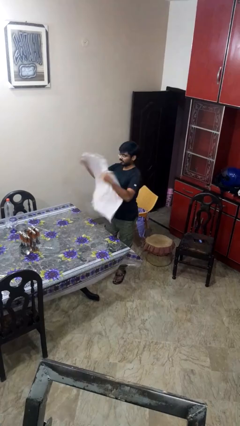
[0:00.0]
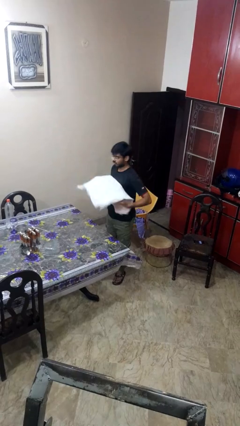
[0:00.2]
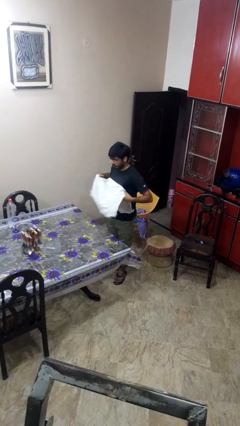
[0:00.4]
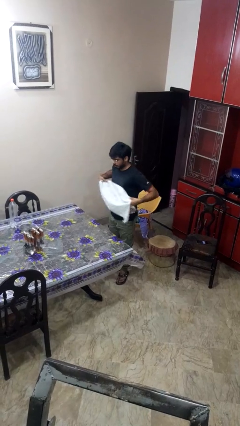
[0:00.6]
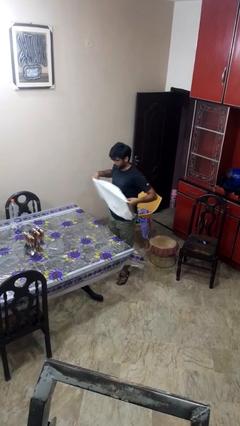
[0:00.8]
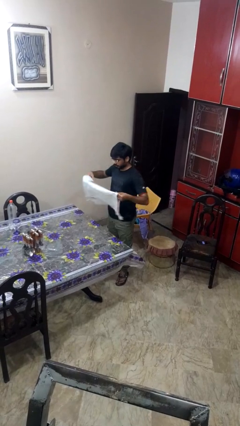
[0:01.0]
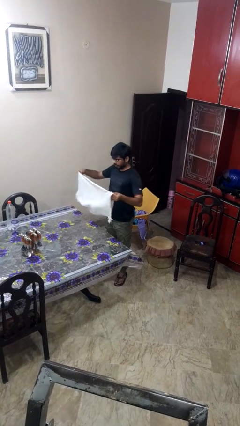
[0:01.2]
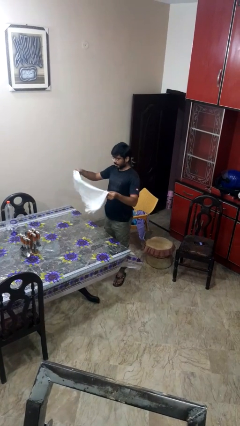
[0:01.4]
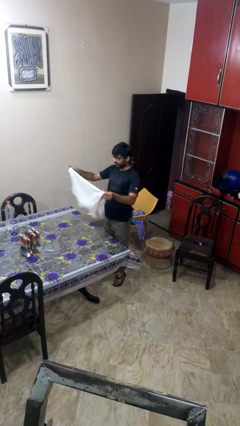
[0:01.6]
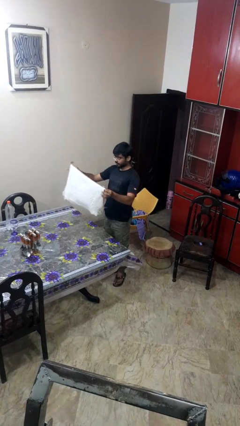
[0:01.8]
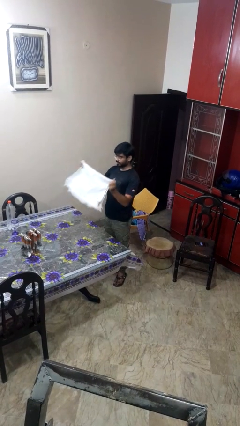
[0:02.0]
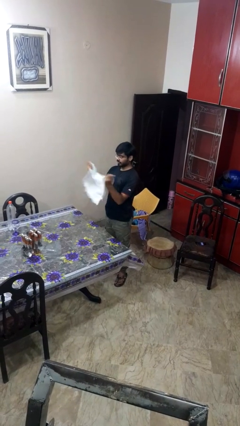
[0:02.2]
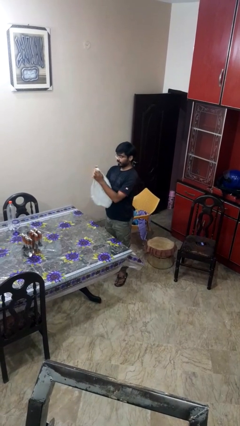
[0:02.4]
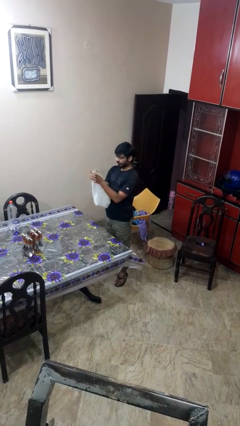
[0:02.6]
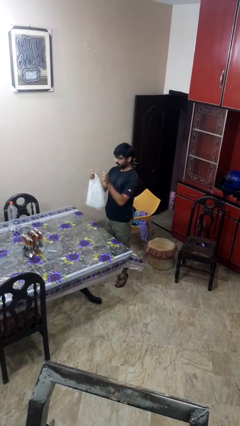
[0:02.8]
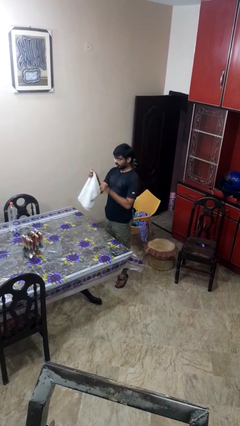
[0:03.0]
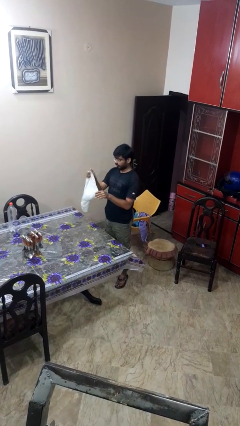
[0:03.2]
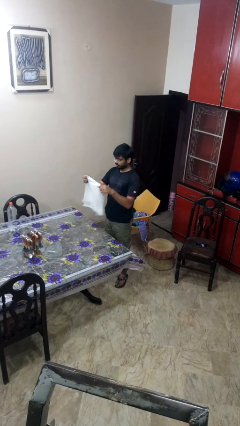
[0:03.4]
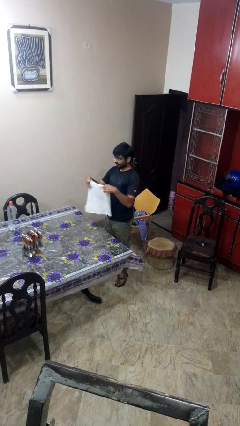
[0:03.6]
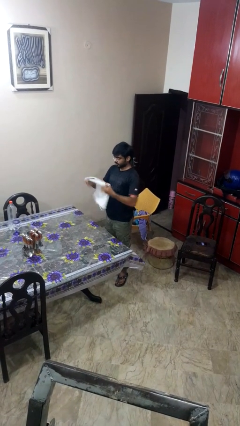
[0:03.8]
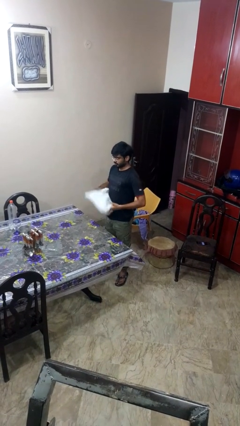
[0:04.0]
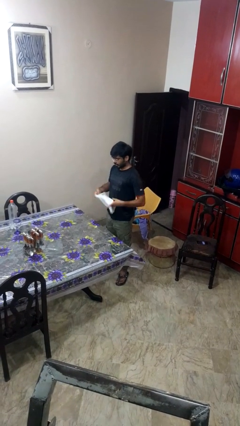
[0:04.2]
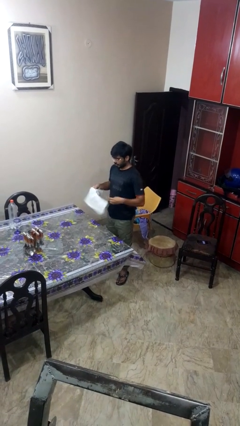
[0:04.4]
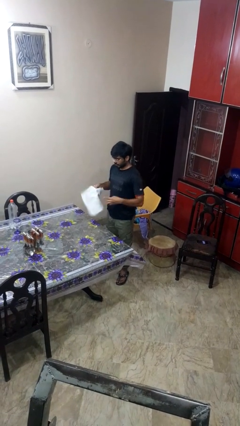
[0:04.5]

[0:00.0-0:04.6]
person folds tablecloth

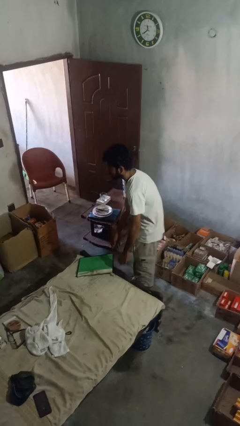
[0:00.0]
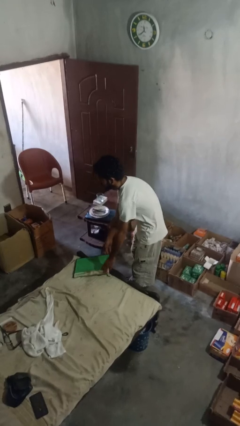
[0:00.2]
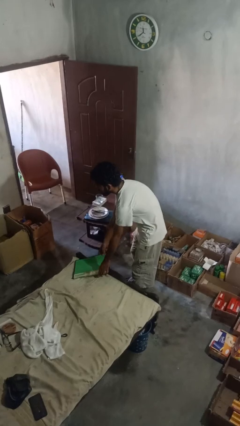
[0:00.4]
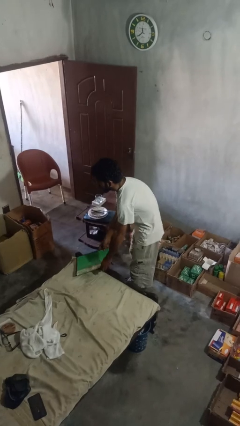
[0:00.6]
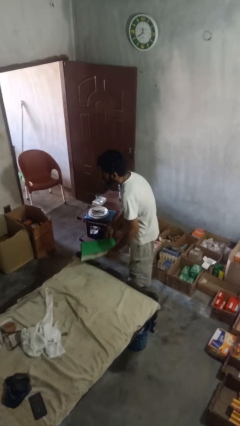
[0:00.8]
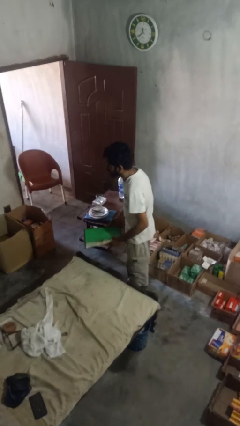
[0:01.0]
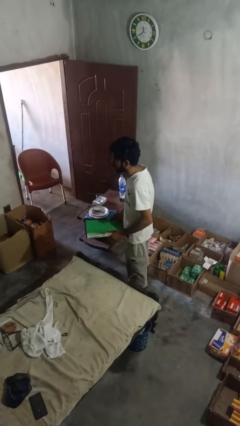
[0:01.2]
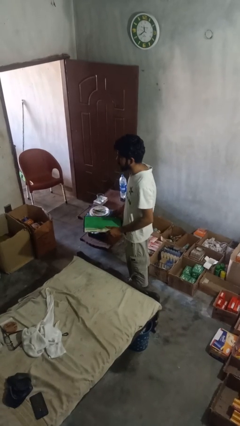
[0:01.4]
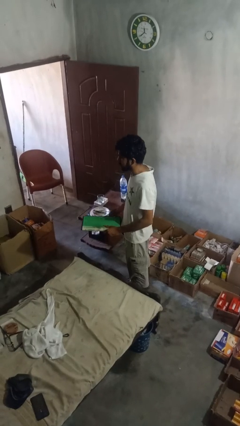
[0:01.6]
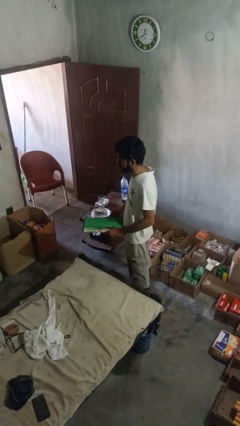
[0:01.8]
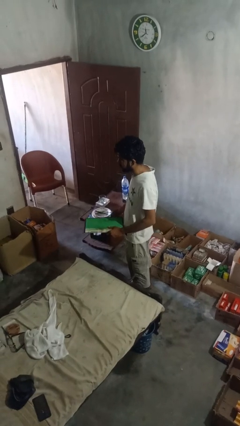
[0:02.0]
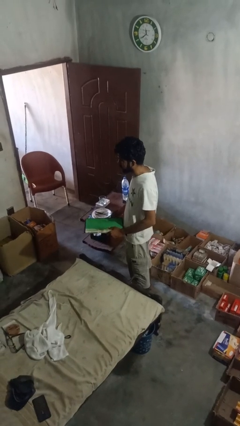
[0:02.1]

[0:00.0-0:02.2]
person puts down object on bed

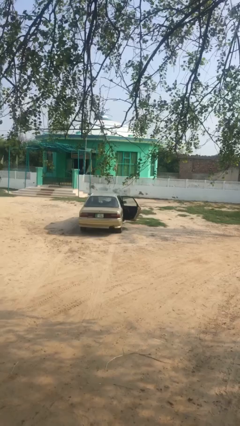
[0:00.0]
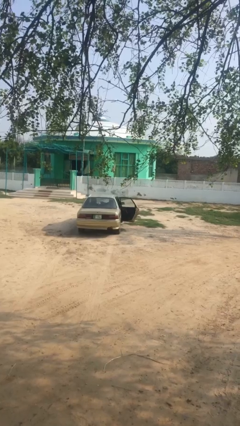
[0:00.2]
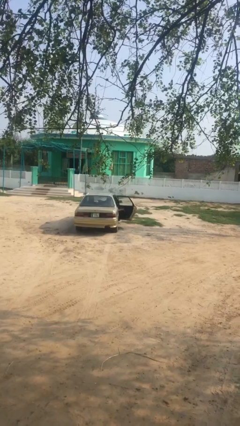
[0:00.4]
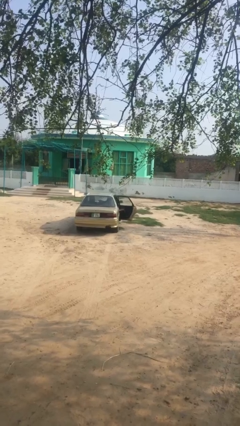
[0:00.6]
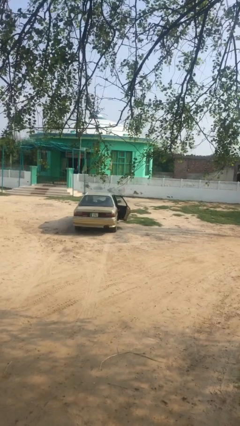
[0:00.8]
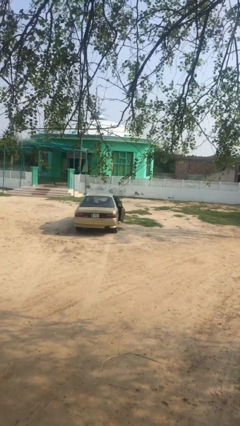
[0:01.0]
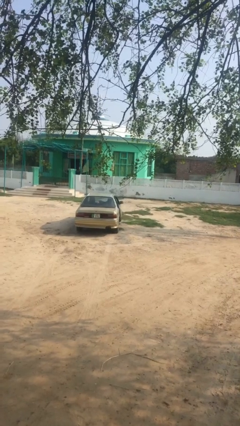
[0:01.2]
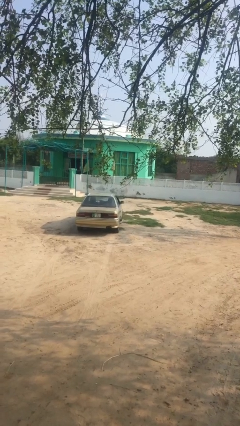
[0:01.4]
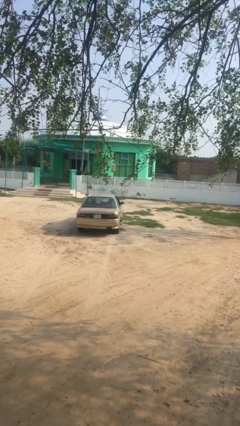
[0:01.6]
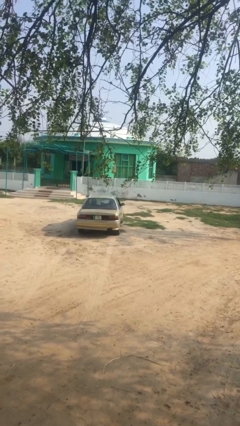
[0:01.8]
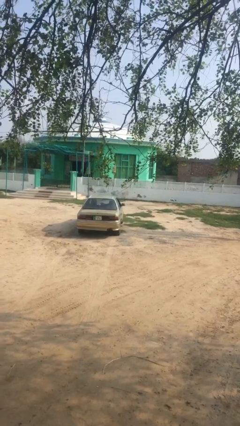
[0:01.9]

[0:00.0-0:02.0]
person closes car door

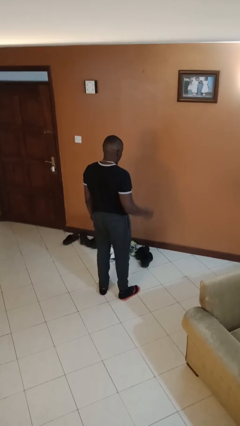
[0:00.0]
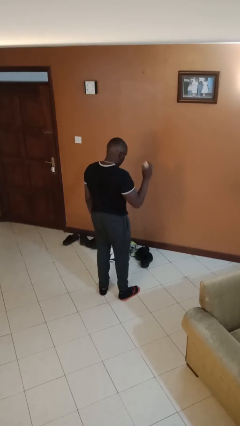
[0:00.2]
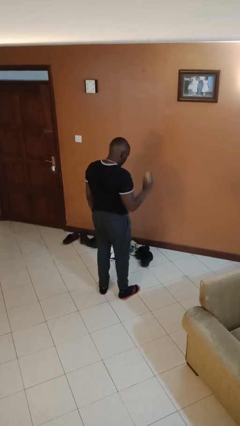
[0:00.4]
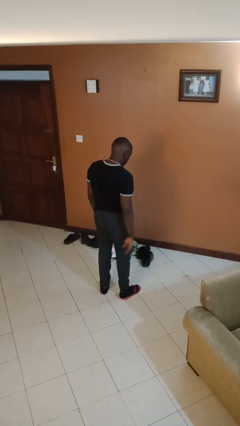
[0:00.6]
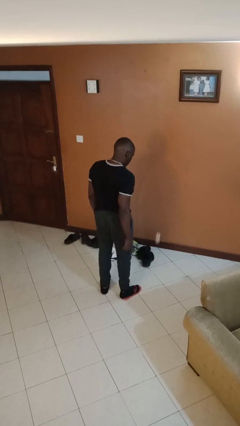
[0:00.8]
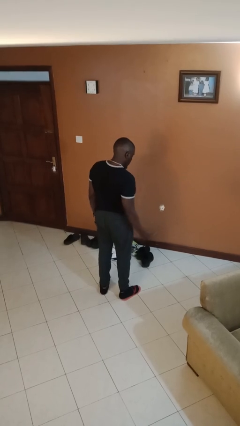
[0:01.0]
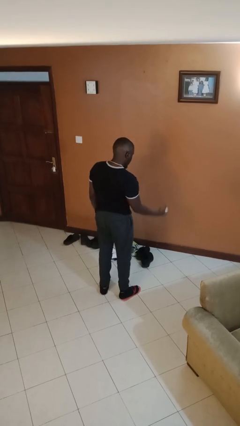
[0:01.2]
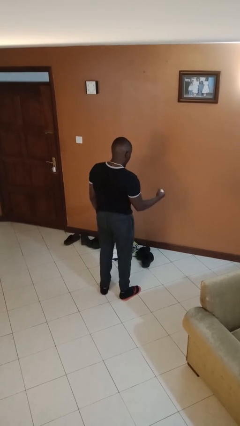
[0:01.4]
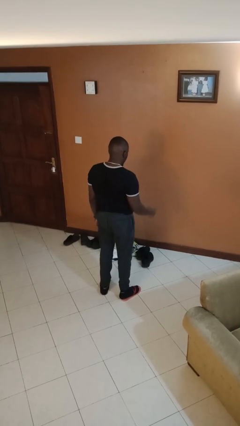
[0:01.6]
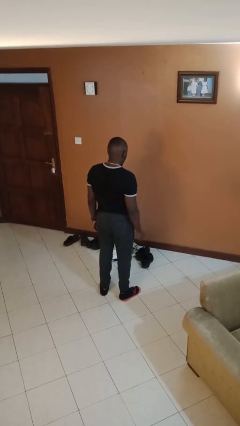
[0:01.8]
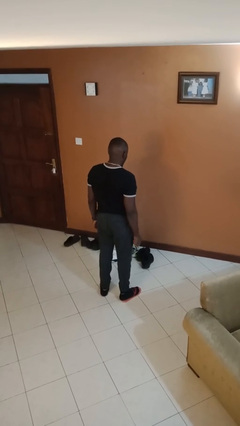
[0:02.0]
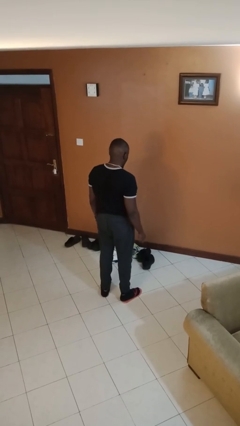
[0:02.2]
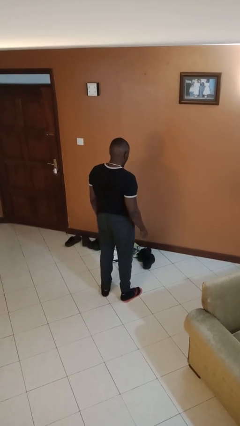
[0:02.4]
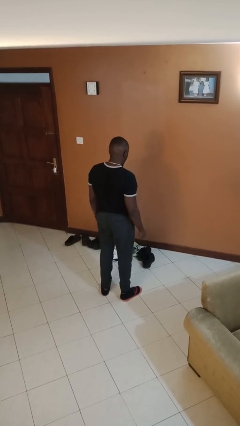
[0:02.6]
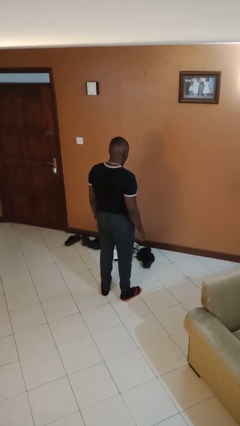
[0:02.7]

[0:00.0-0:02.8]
person bounces ball on floor

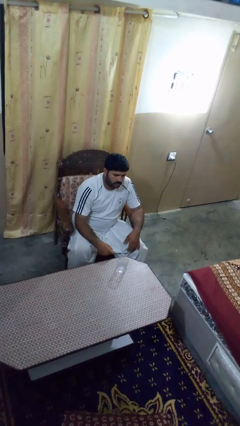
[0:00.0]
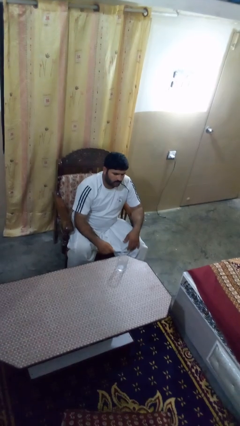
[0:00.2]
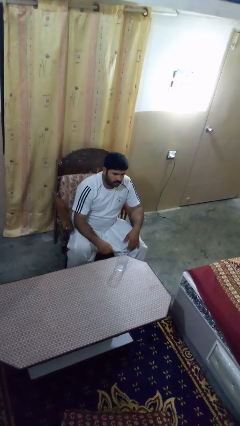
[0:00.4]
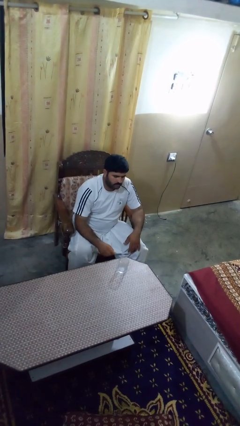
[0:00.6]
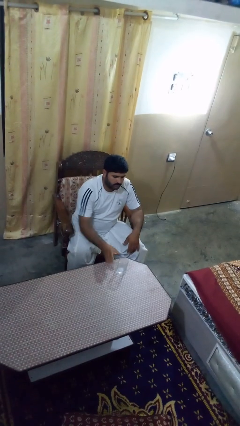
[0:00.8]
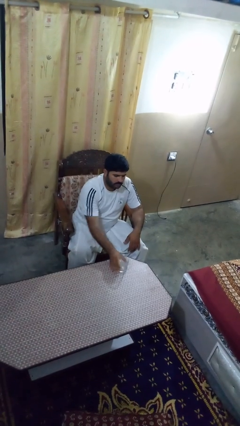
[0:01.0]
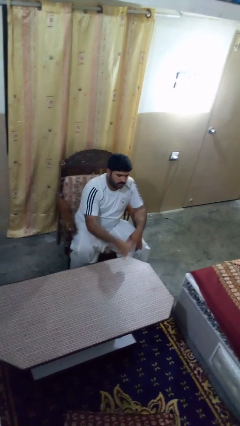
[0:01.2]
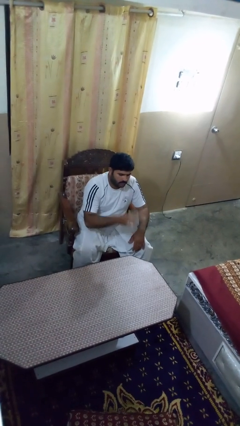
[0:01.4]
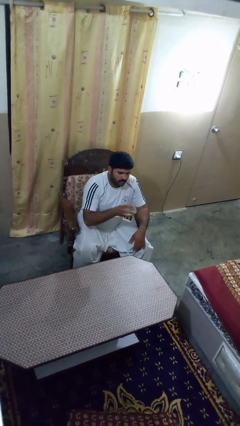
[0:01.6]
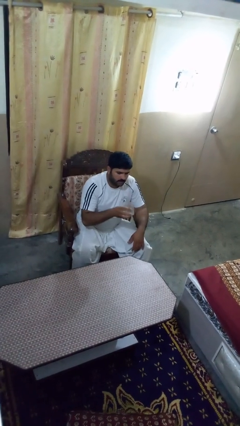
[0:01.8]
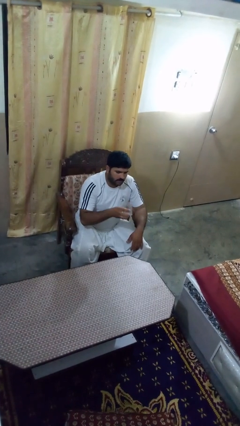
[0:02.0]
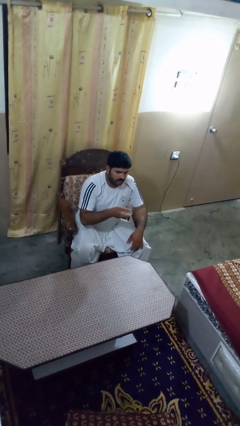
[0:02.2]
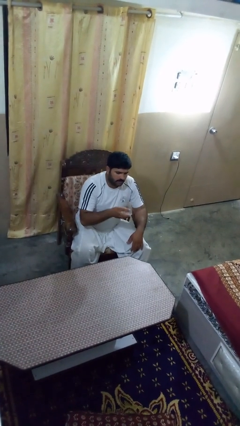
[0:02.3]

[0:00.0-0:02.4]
person picks up object from table

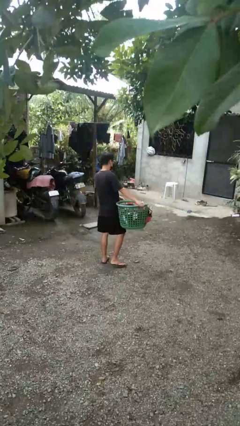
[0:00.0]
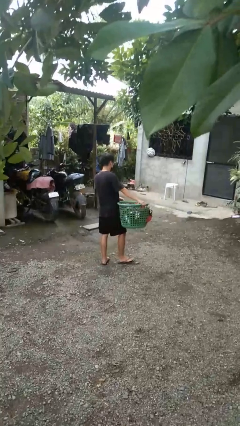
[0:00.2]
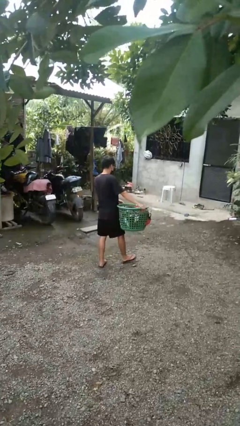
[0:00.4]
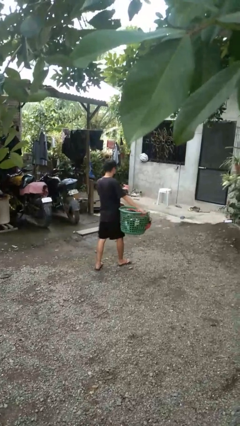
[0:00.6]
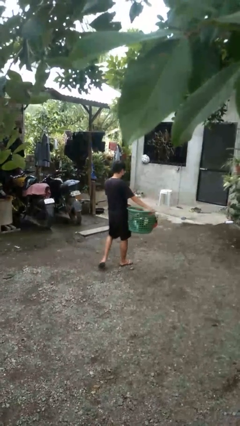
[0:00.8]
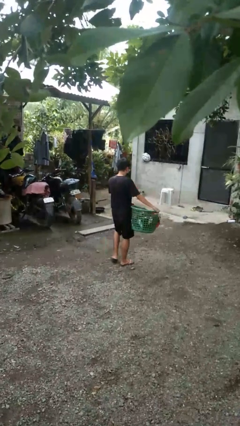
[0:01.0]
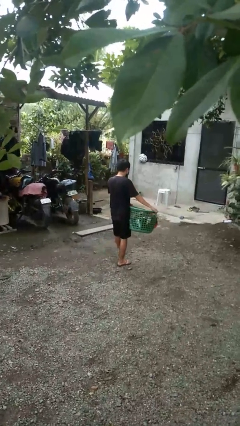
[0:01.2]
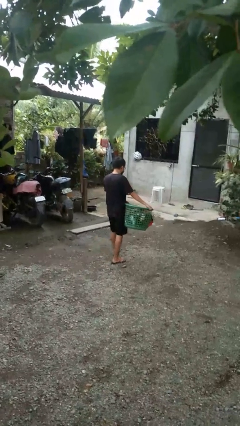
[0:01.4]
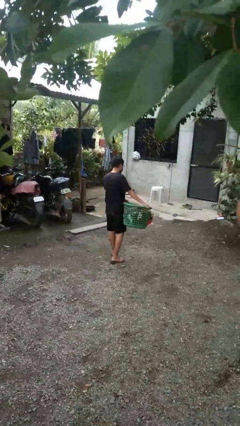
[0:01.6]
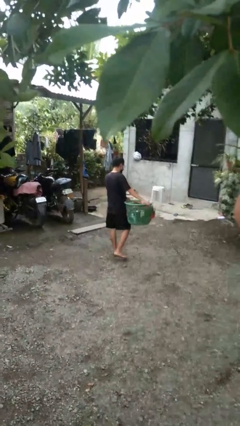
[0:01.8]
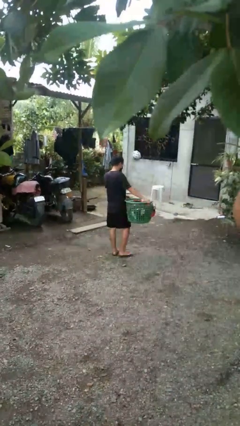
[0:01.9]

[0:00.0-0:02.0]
person carries laundry basket

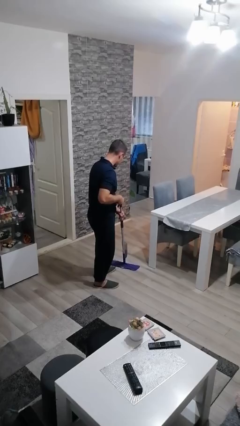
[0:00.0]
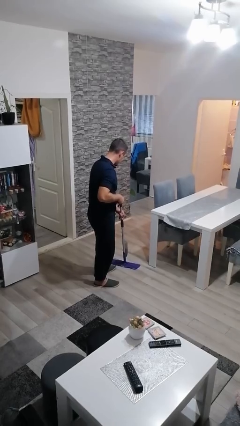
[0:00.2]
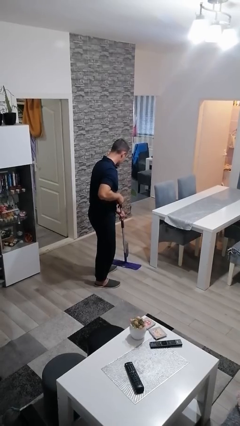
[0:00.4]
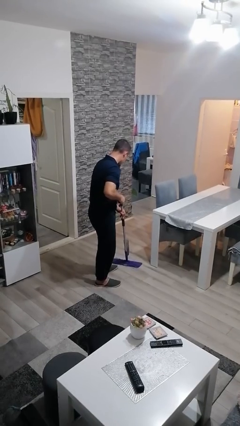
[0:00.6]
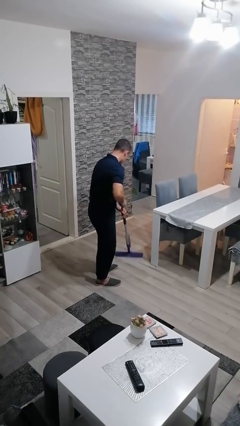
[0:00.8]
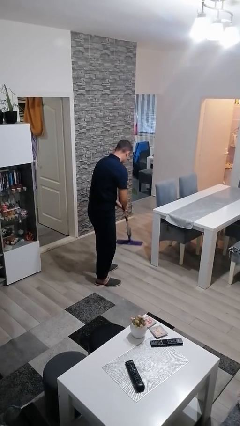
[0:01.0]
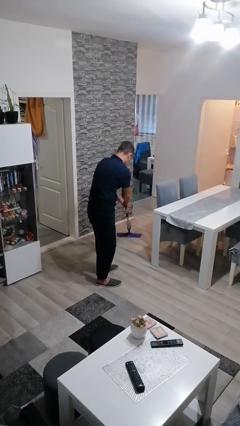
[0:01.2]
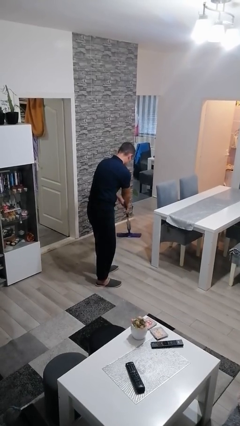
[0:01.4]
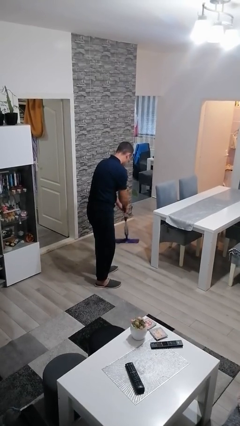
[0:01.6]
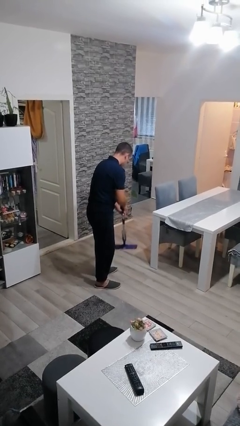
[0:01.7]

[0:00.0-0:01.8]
person mops
